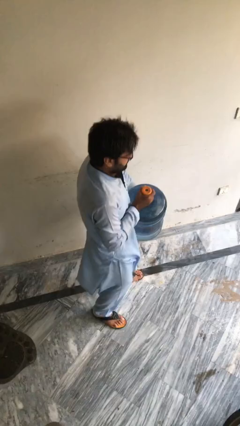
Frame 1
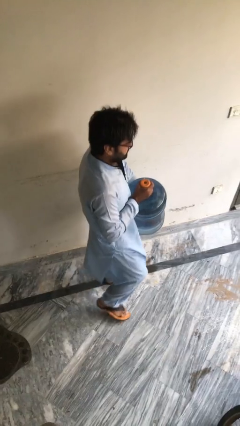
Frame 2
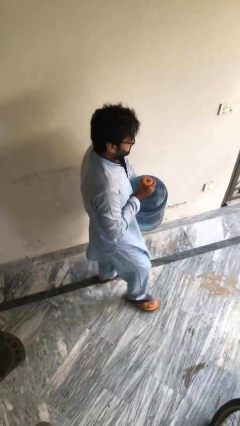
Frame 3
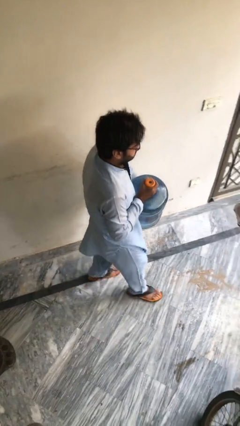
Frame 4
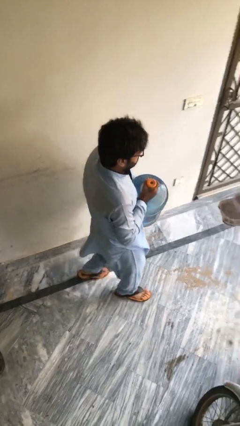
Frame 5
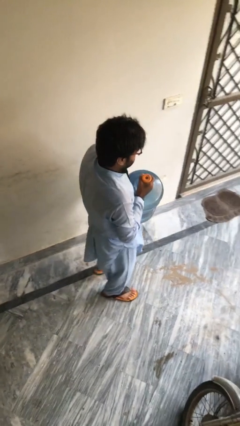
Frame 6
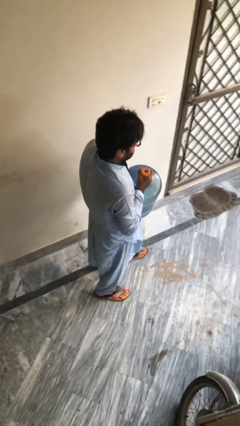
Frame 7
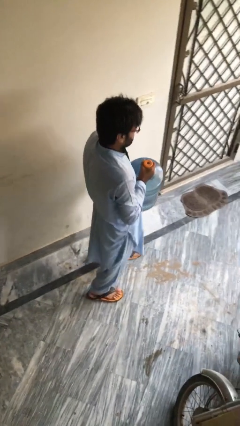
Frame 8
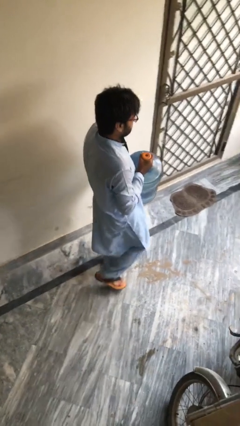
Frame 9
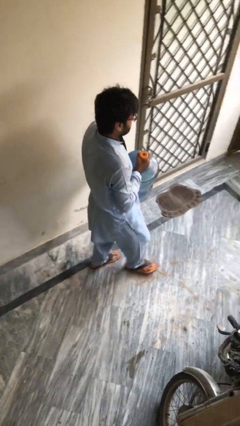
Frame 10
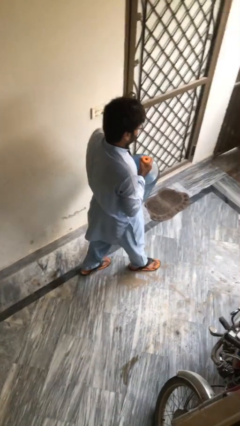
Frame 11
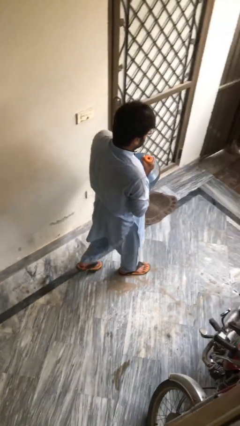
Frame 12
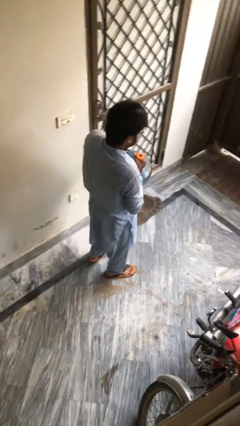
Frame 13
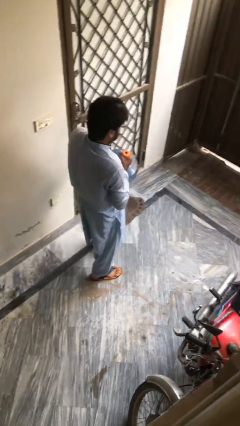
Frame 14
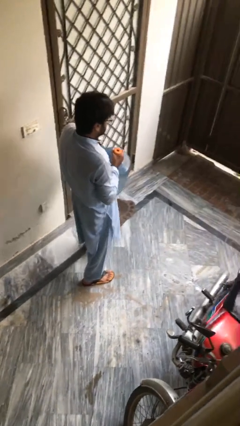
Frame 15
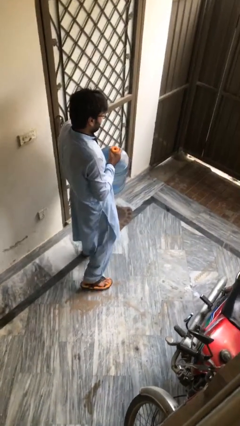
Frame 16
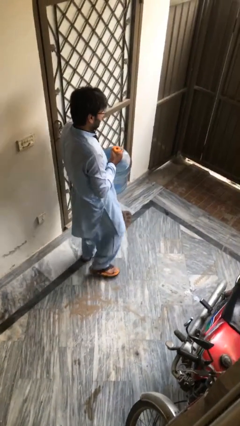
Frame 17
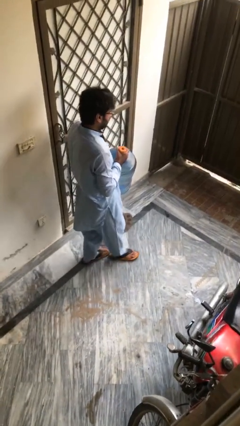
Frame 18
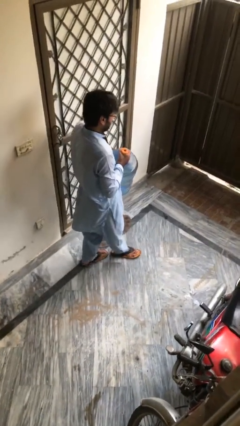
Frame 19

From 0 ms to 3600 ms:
person carries heavy object

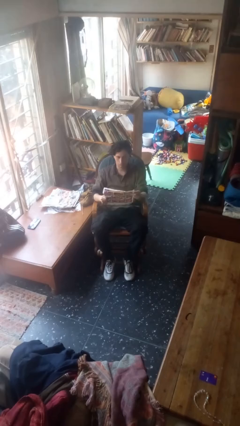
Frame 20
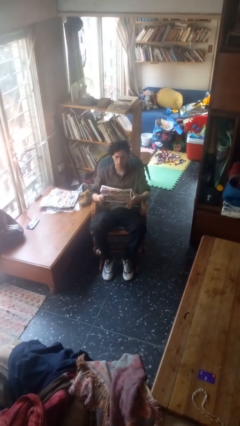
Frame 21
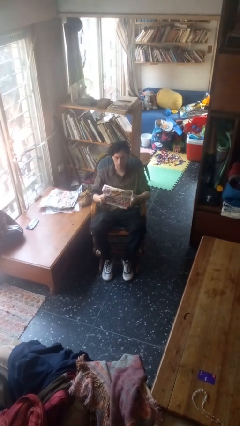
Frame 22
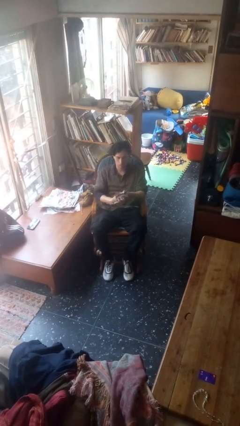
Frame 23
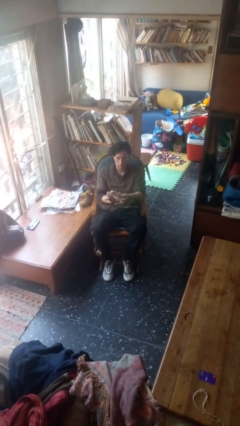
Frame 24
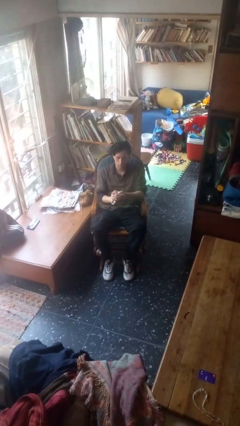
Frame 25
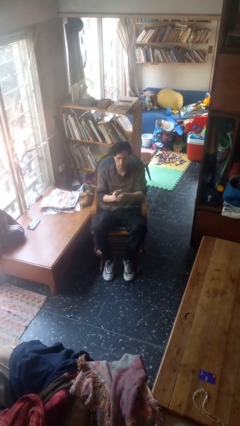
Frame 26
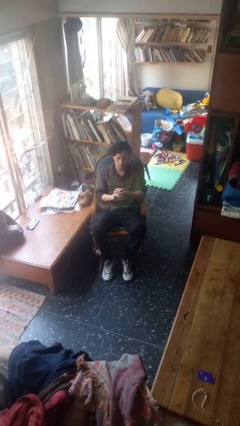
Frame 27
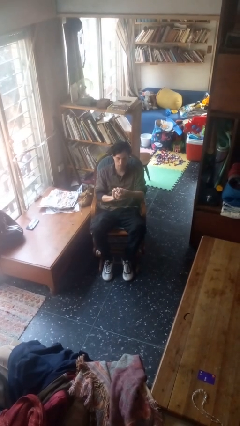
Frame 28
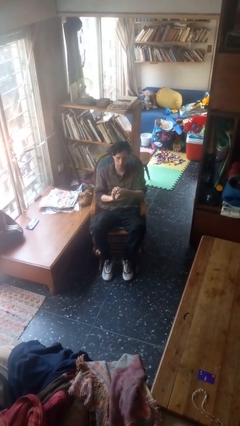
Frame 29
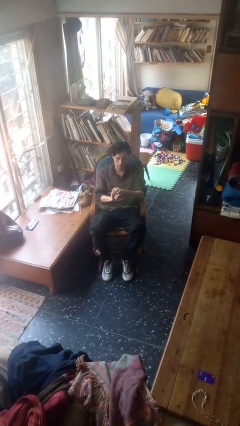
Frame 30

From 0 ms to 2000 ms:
person crumples paper

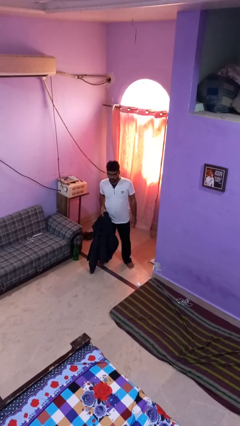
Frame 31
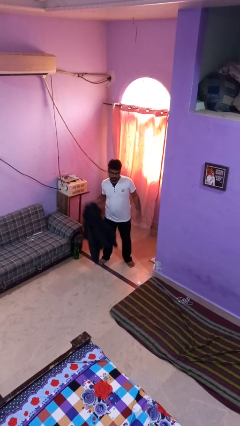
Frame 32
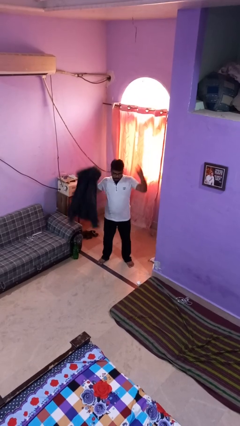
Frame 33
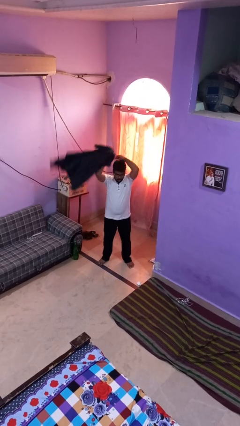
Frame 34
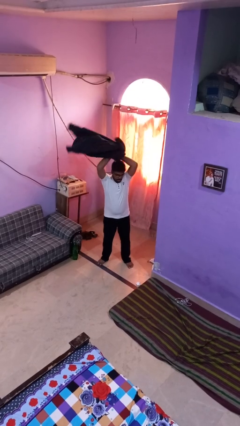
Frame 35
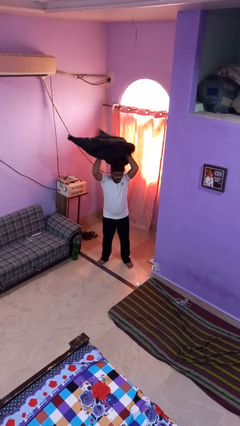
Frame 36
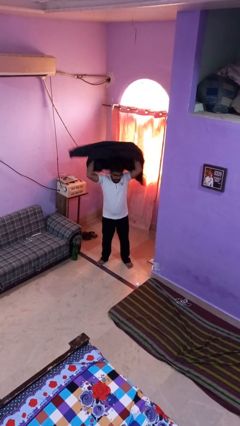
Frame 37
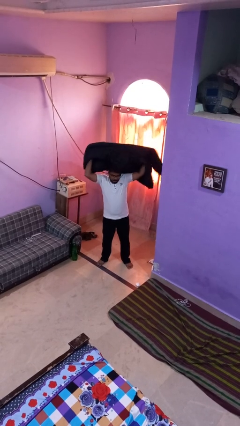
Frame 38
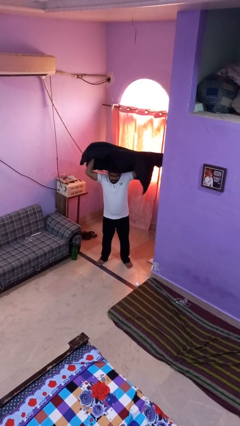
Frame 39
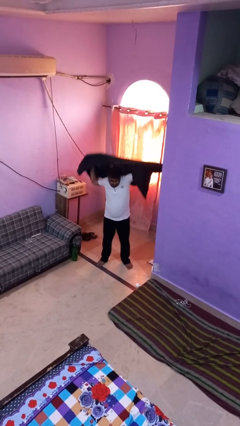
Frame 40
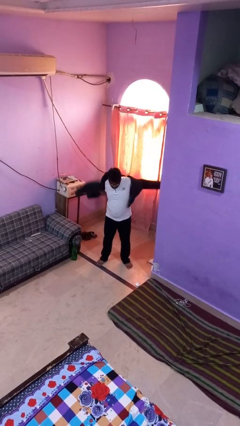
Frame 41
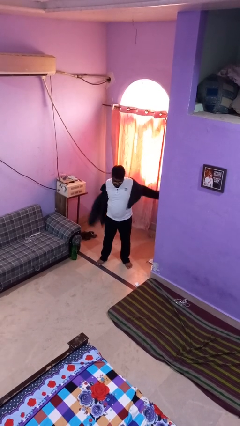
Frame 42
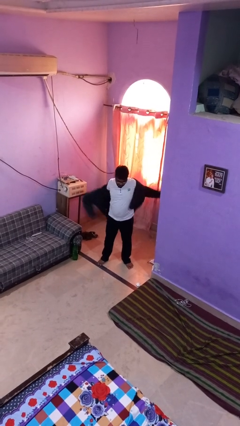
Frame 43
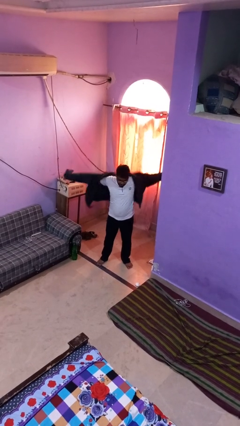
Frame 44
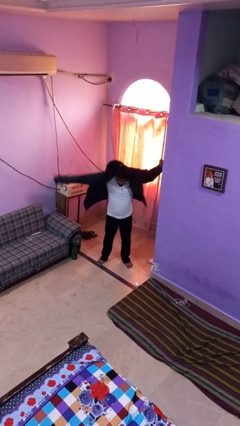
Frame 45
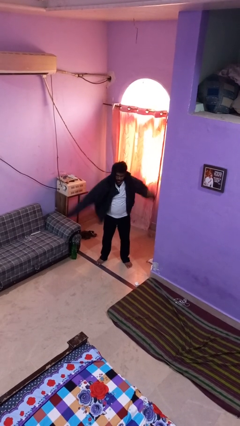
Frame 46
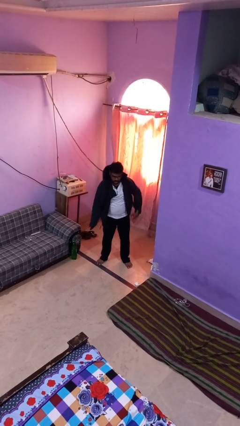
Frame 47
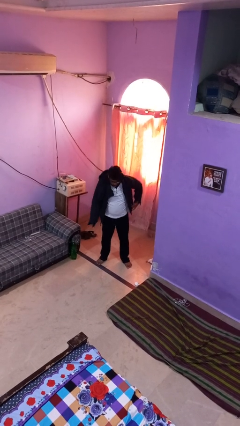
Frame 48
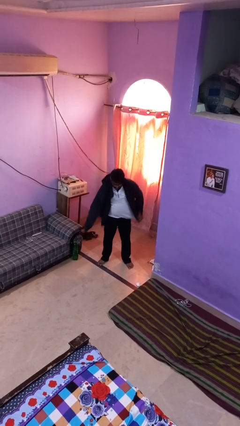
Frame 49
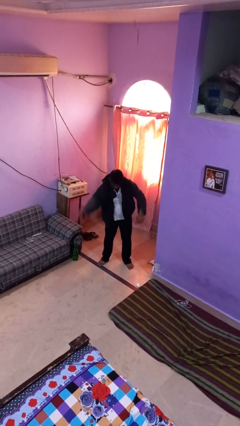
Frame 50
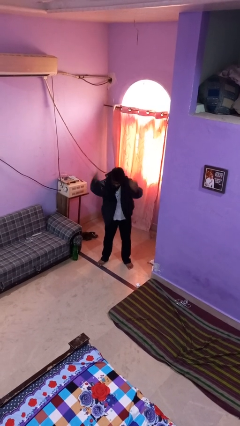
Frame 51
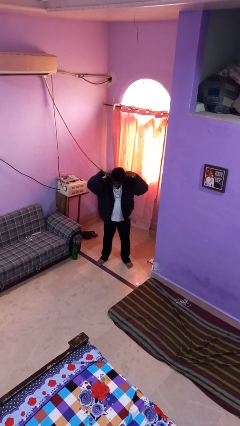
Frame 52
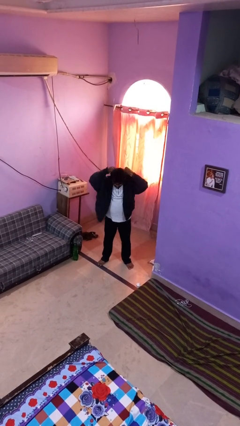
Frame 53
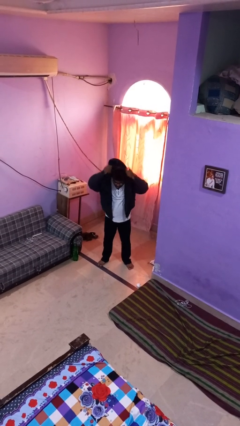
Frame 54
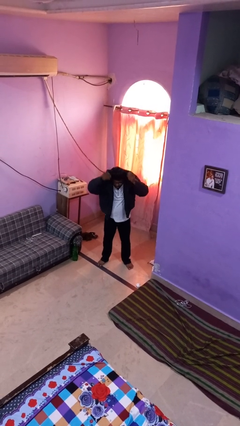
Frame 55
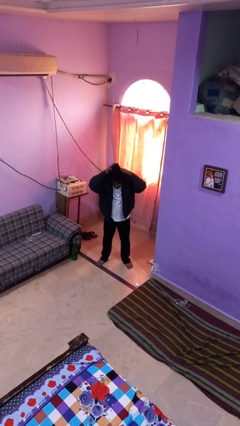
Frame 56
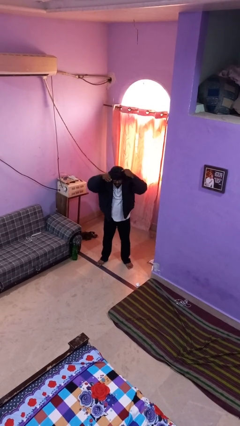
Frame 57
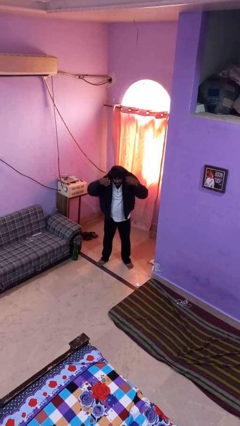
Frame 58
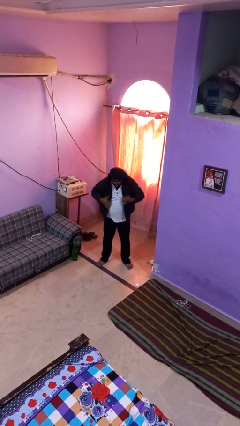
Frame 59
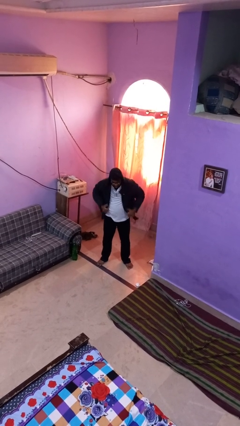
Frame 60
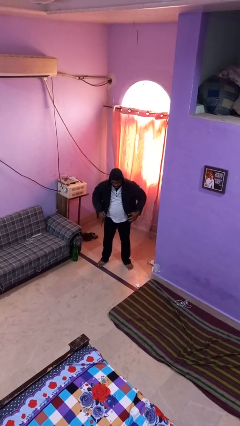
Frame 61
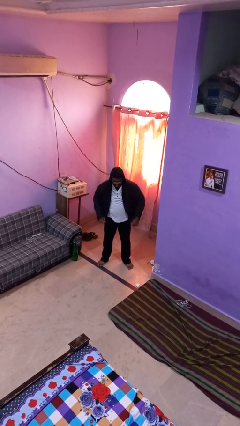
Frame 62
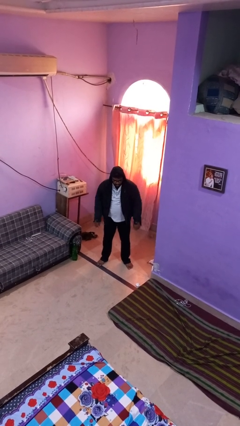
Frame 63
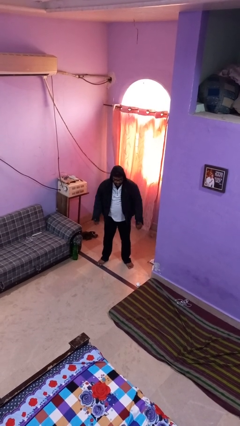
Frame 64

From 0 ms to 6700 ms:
person puts on hoodie

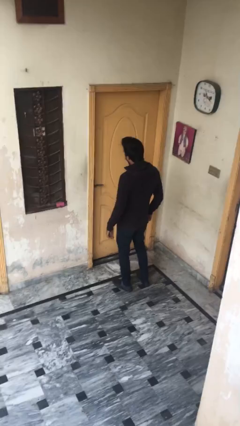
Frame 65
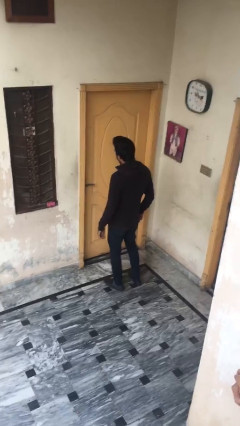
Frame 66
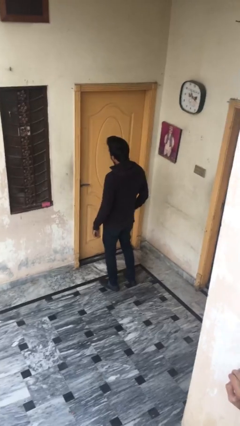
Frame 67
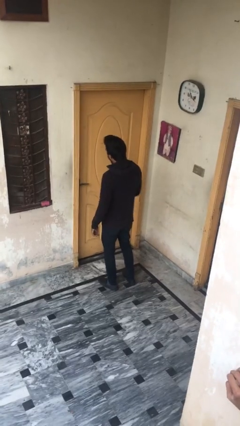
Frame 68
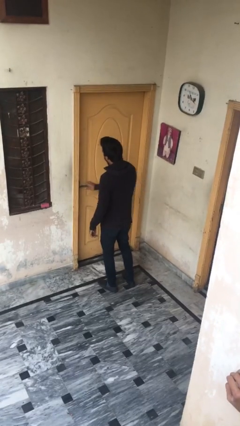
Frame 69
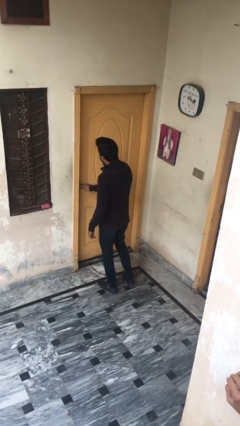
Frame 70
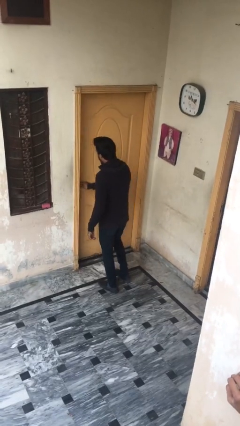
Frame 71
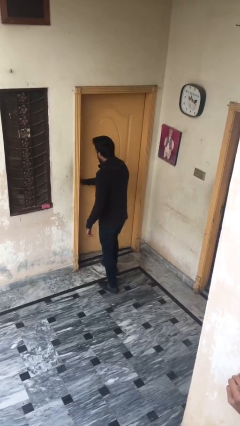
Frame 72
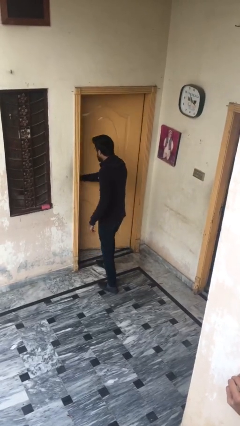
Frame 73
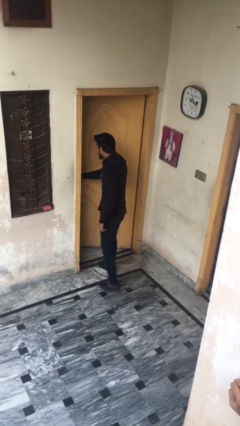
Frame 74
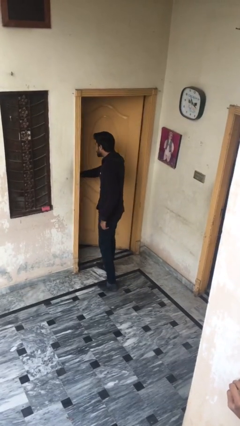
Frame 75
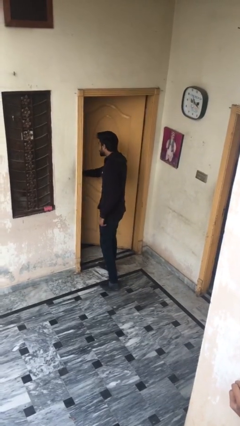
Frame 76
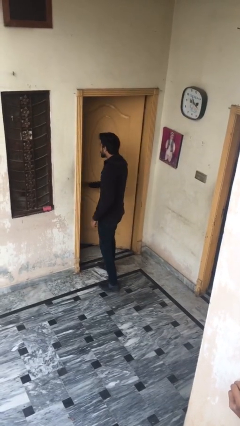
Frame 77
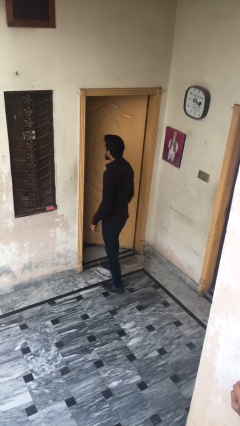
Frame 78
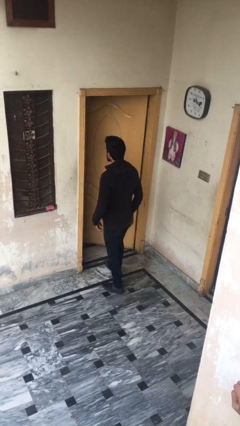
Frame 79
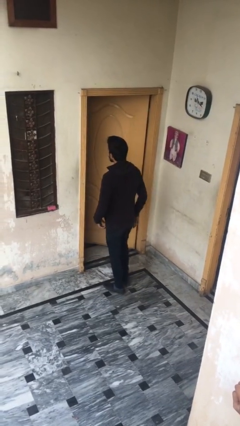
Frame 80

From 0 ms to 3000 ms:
person opens facility door

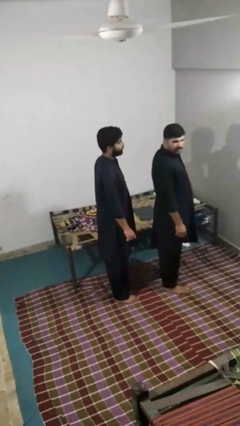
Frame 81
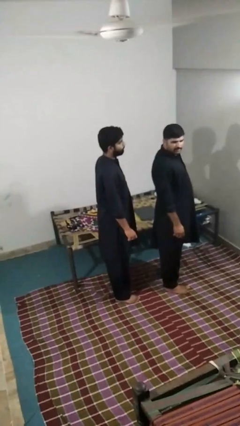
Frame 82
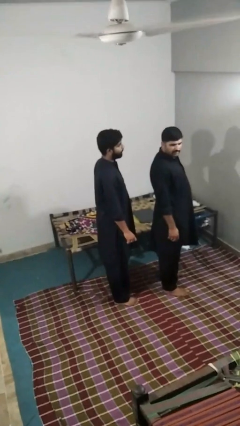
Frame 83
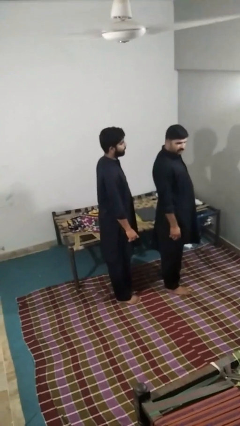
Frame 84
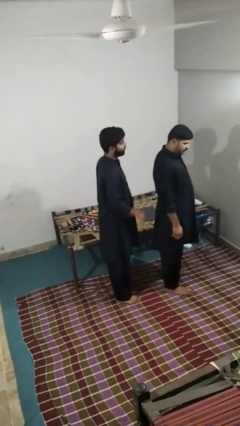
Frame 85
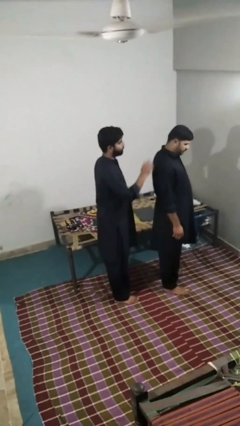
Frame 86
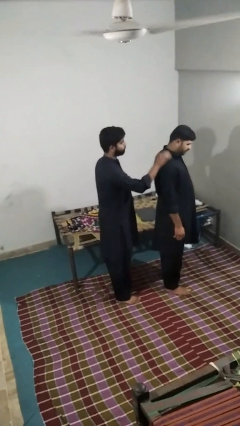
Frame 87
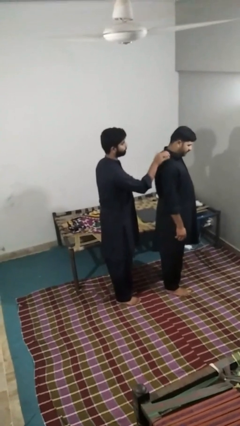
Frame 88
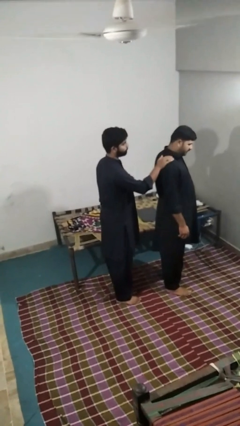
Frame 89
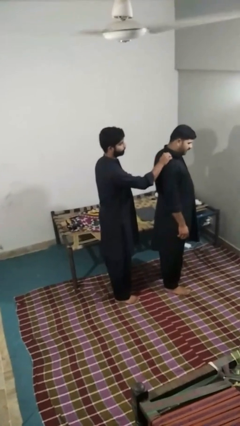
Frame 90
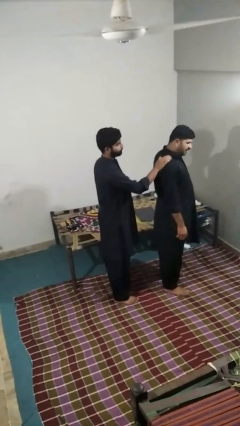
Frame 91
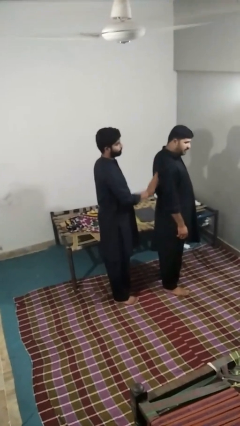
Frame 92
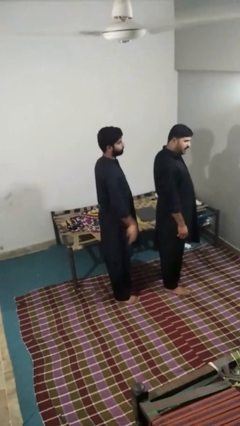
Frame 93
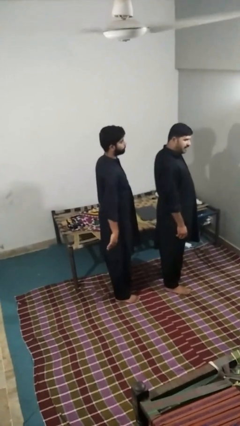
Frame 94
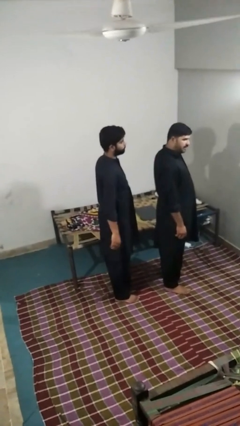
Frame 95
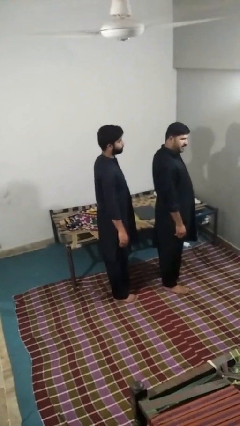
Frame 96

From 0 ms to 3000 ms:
person touches back of person
